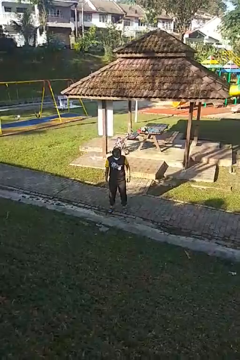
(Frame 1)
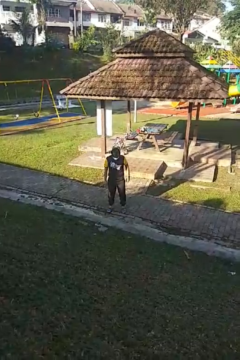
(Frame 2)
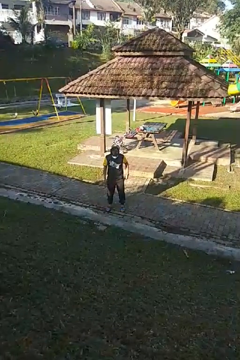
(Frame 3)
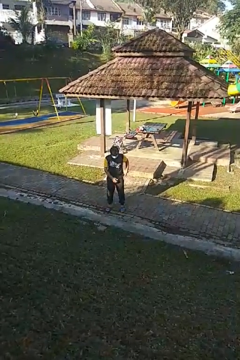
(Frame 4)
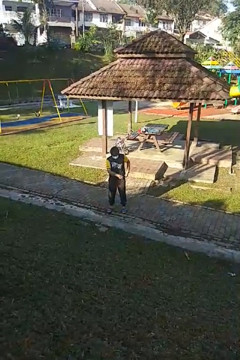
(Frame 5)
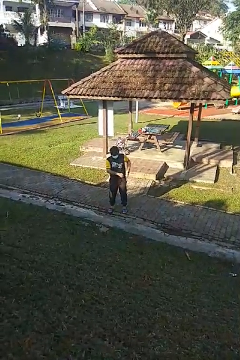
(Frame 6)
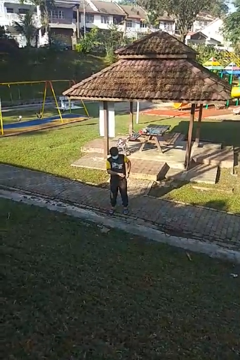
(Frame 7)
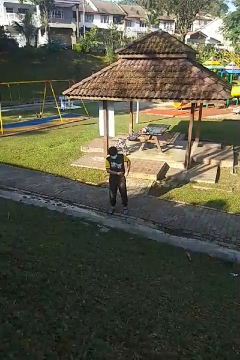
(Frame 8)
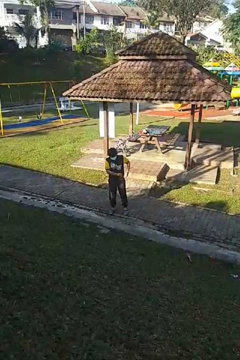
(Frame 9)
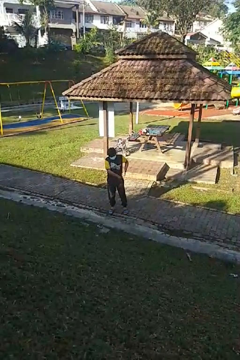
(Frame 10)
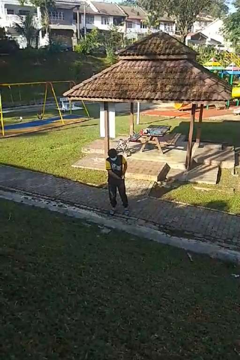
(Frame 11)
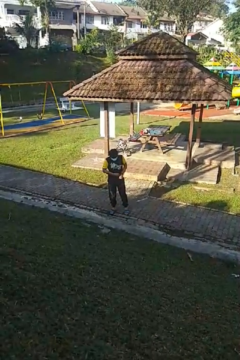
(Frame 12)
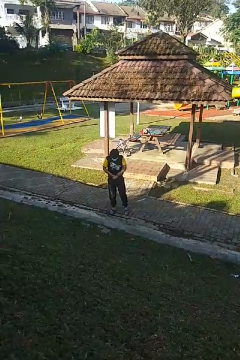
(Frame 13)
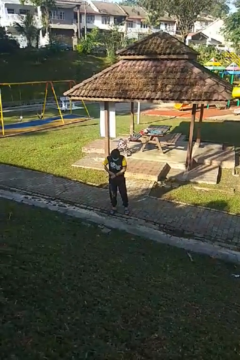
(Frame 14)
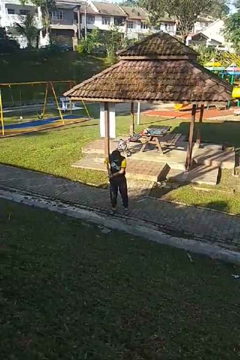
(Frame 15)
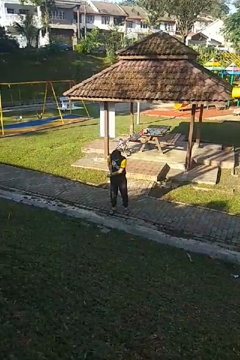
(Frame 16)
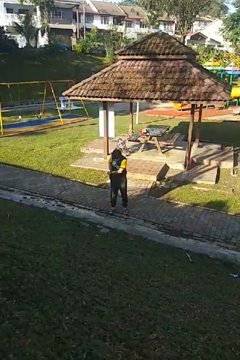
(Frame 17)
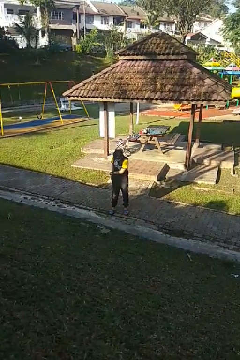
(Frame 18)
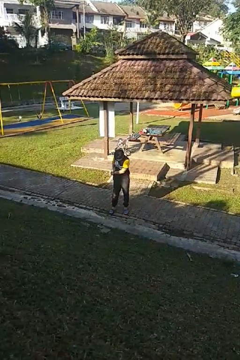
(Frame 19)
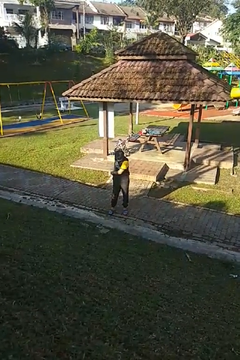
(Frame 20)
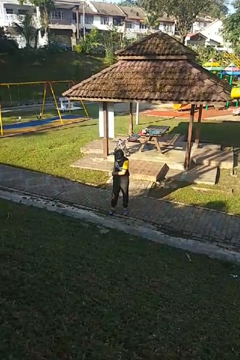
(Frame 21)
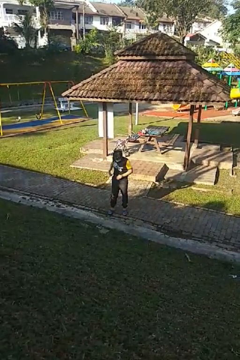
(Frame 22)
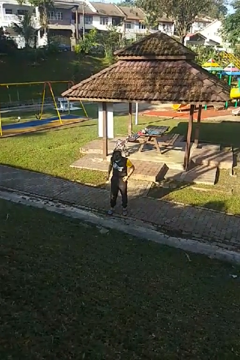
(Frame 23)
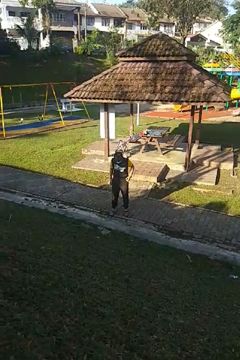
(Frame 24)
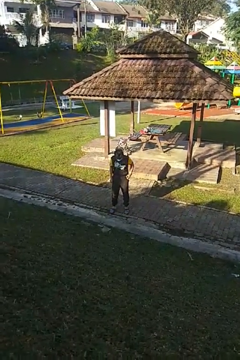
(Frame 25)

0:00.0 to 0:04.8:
person tucks in shirt

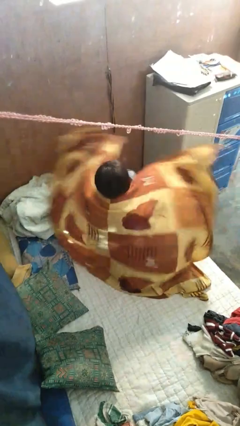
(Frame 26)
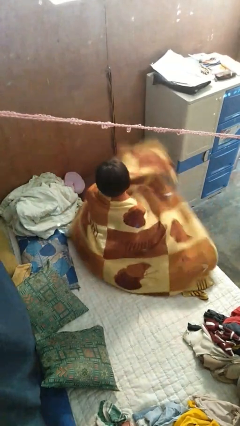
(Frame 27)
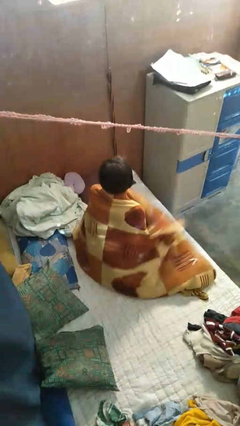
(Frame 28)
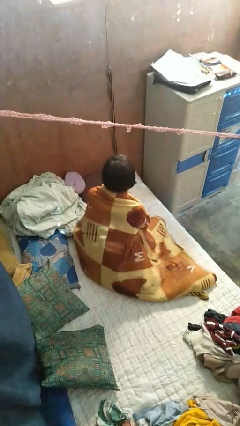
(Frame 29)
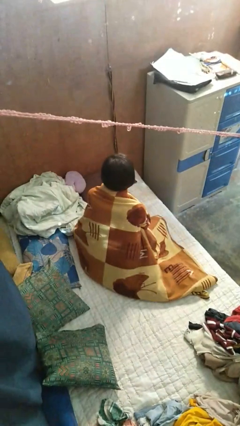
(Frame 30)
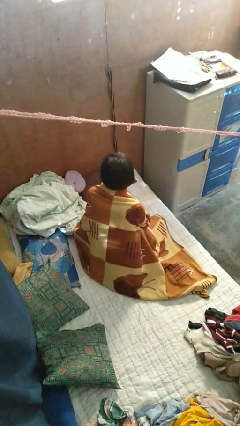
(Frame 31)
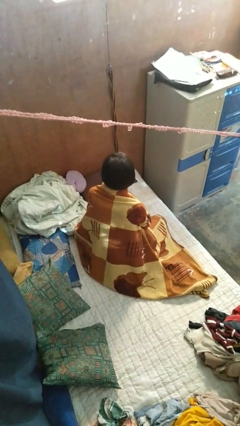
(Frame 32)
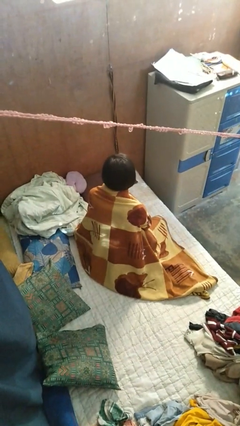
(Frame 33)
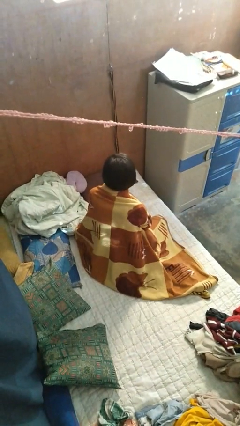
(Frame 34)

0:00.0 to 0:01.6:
person covers with blanket

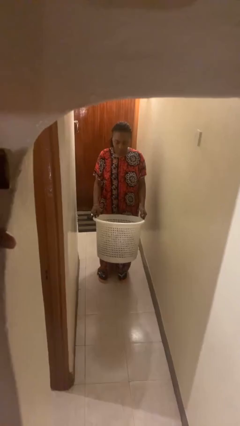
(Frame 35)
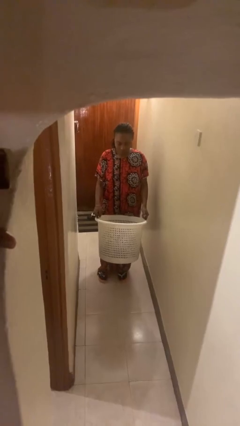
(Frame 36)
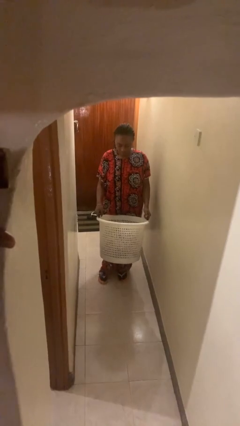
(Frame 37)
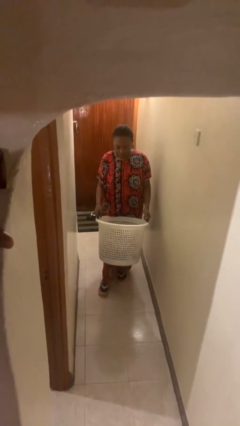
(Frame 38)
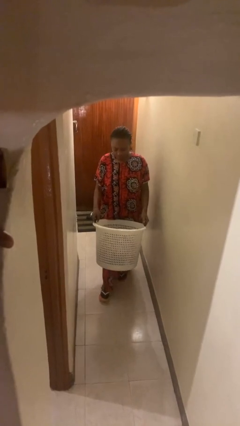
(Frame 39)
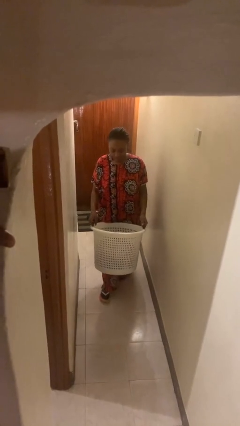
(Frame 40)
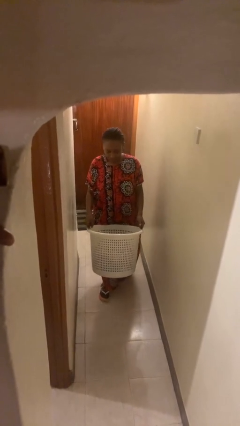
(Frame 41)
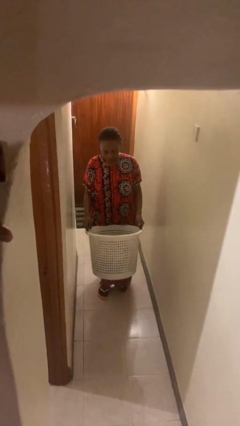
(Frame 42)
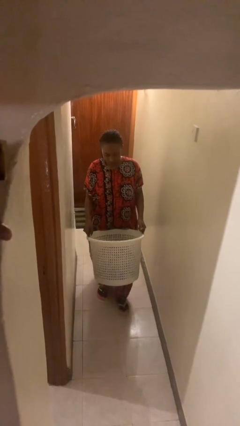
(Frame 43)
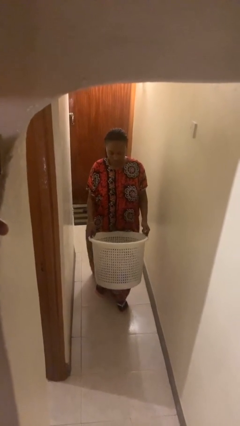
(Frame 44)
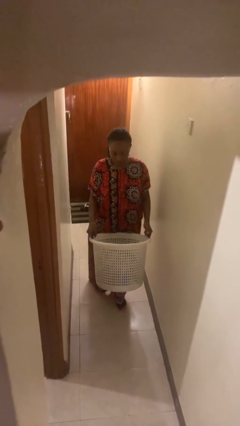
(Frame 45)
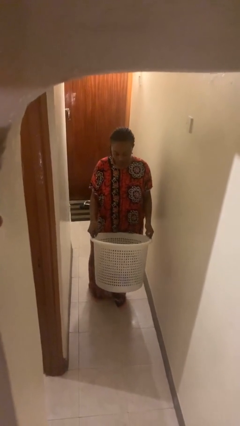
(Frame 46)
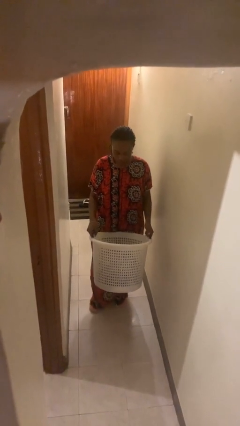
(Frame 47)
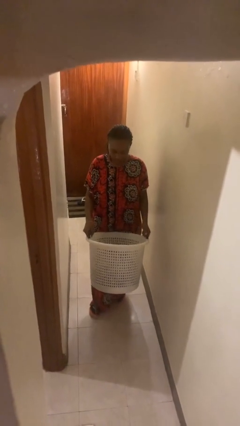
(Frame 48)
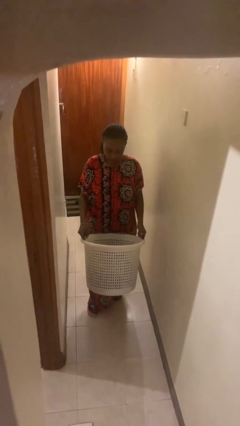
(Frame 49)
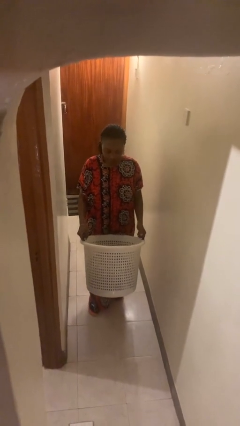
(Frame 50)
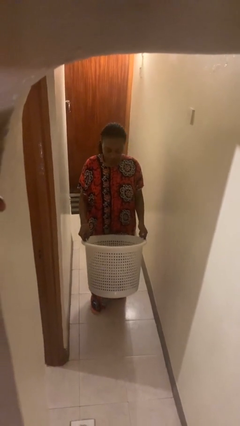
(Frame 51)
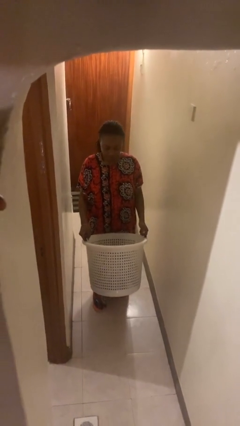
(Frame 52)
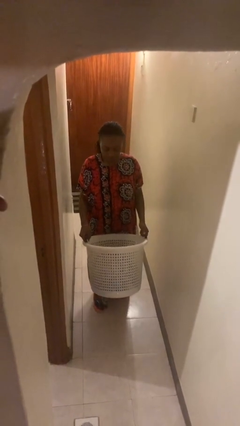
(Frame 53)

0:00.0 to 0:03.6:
person carries laundry basket

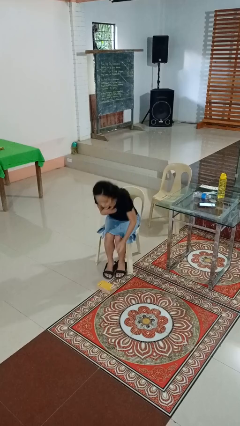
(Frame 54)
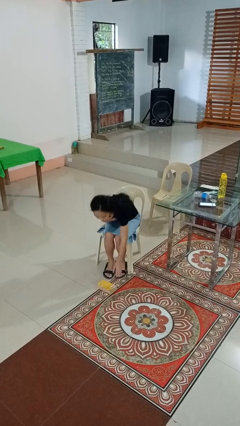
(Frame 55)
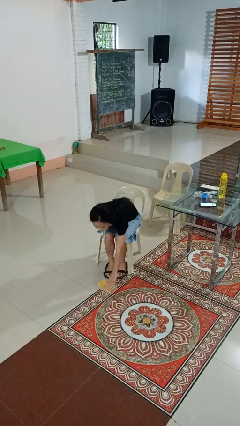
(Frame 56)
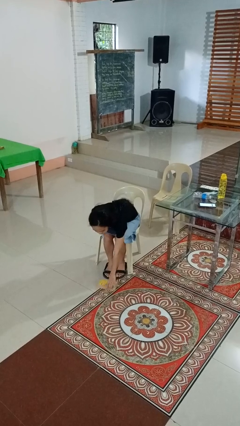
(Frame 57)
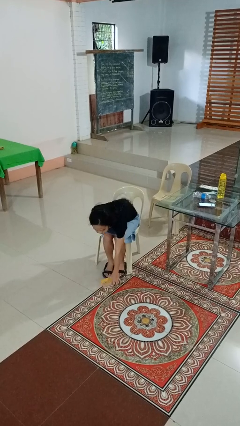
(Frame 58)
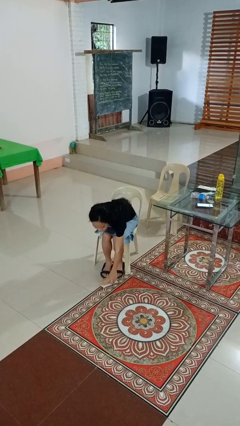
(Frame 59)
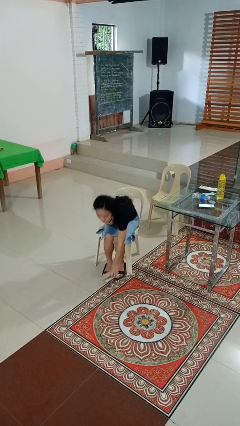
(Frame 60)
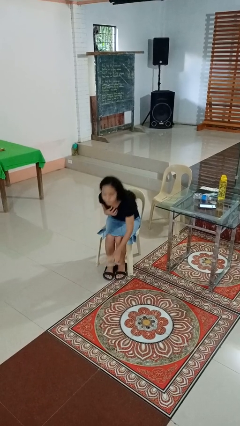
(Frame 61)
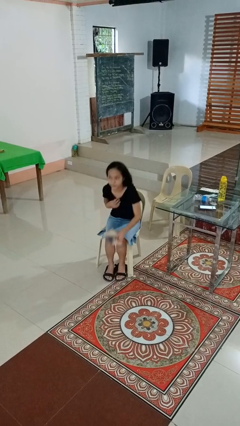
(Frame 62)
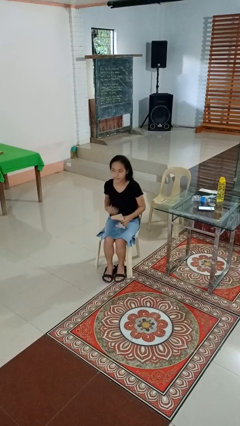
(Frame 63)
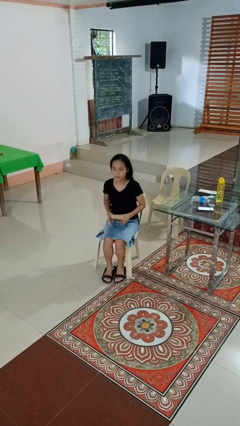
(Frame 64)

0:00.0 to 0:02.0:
person picks up object from floor

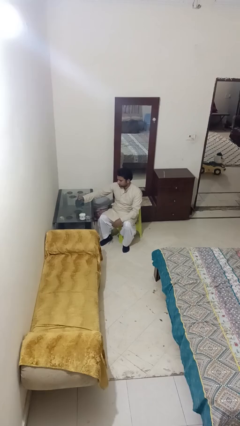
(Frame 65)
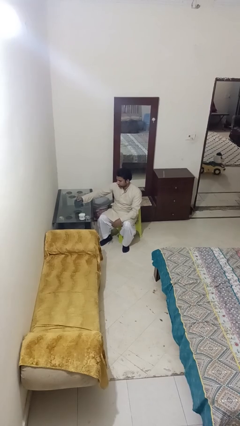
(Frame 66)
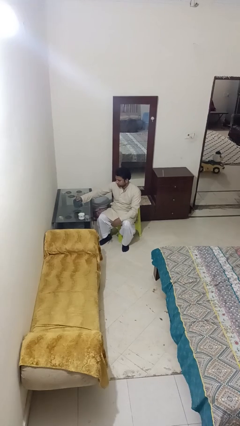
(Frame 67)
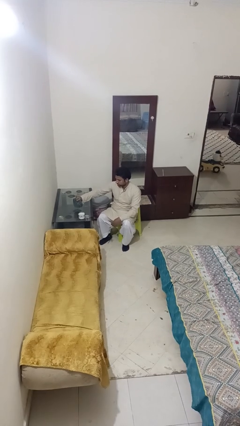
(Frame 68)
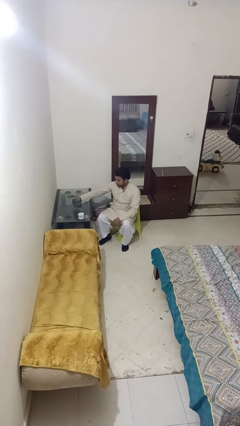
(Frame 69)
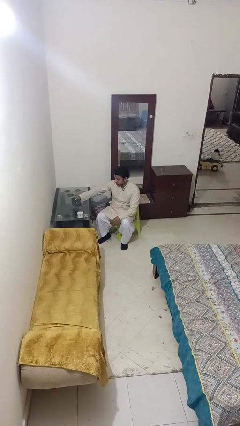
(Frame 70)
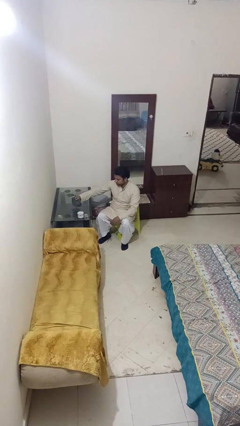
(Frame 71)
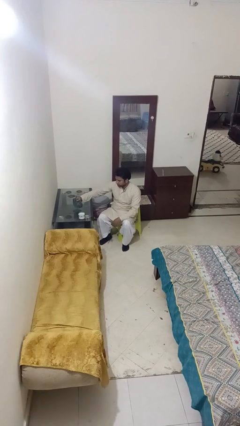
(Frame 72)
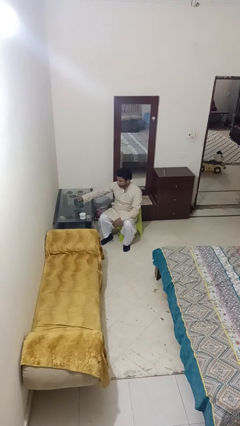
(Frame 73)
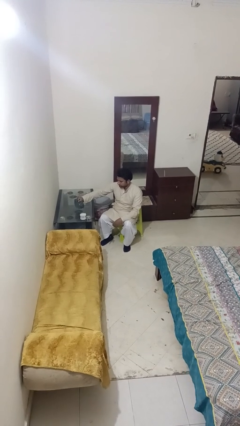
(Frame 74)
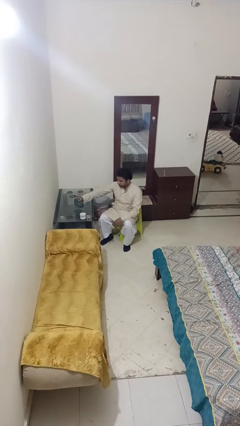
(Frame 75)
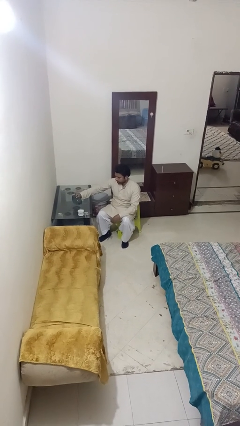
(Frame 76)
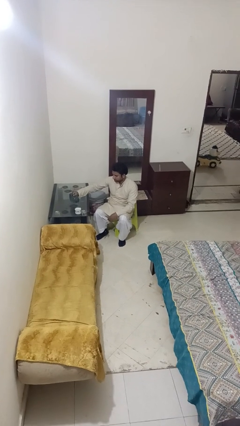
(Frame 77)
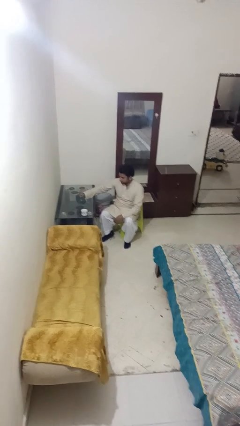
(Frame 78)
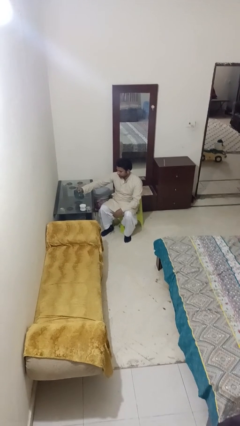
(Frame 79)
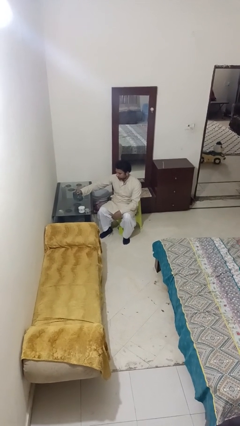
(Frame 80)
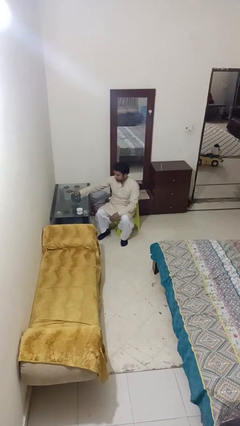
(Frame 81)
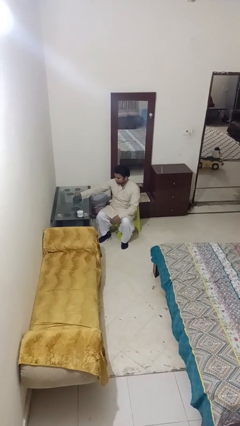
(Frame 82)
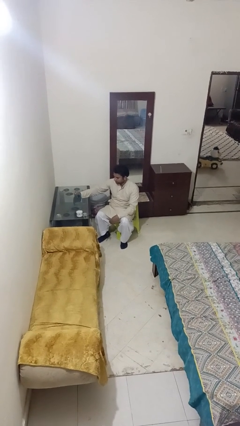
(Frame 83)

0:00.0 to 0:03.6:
person pours liquid into cup

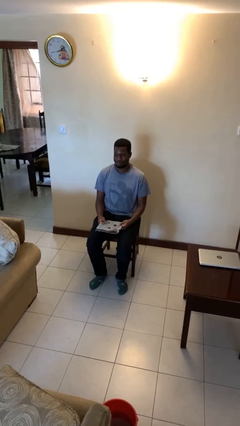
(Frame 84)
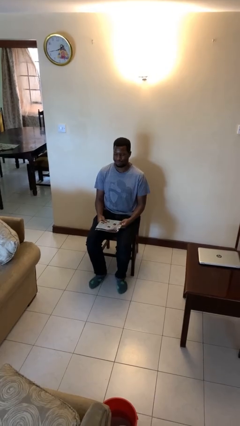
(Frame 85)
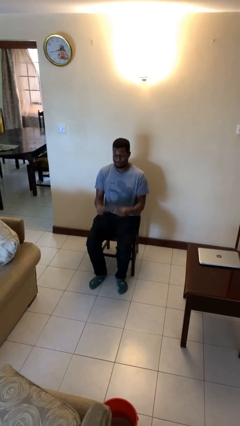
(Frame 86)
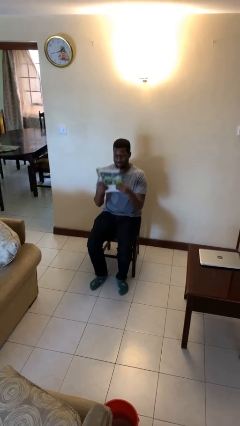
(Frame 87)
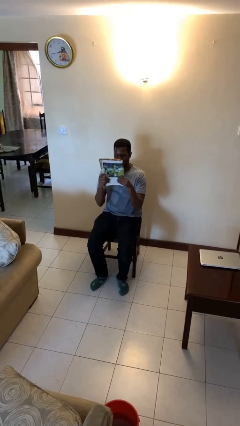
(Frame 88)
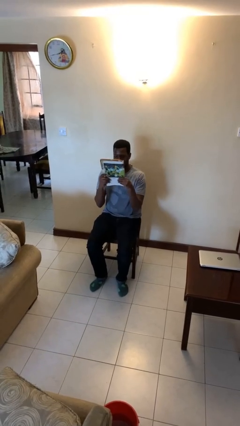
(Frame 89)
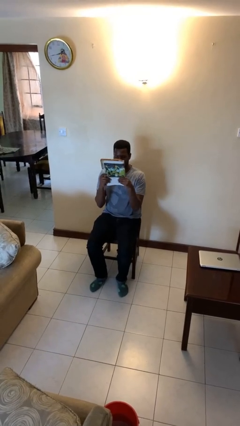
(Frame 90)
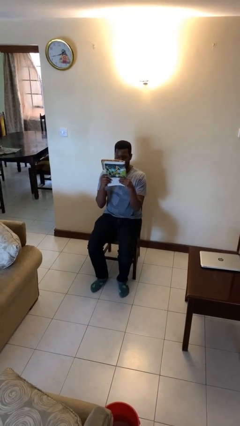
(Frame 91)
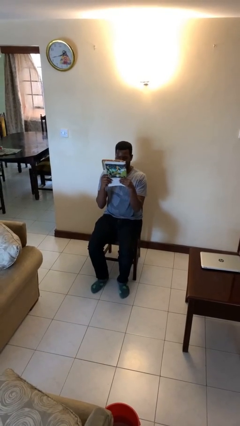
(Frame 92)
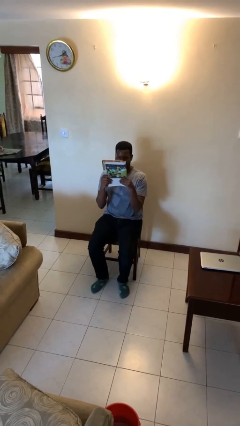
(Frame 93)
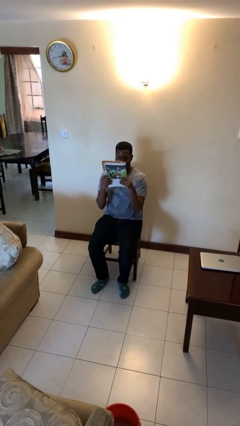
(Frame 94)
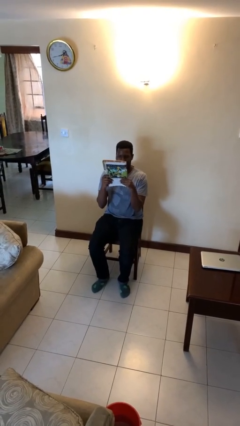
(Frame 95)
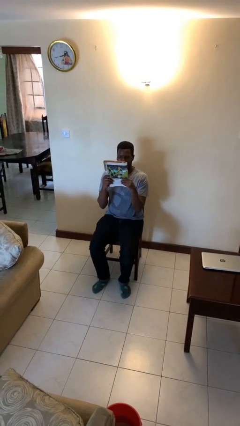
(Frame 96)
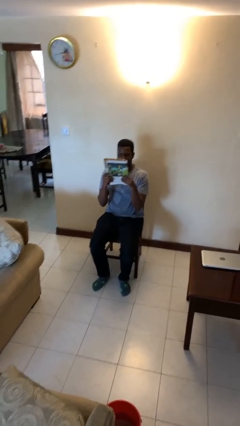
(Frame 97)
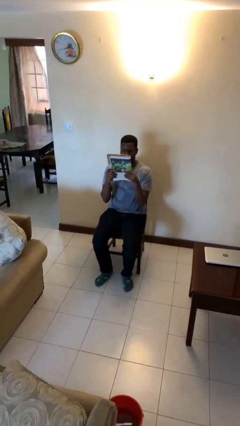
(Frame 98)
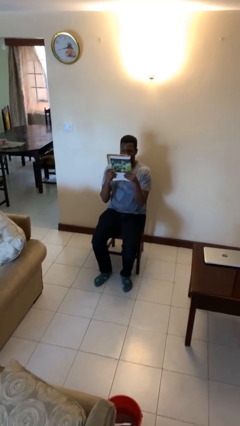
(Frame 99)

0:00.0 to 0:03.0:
person reads document
